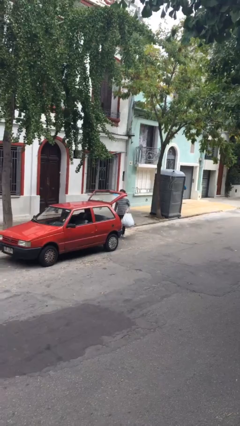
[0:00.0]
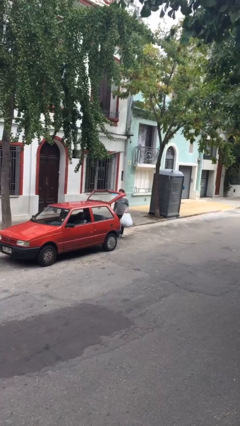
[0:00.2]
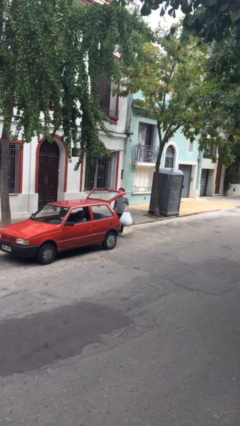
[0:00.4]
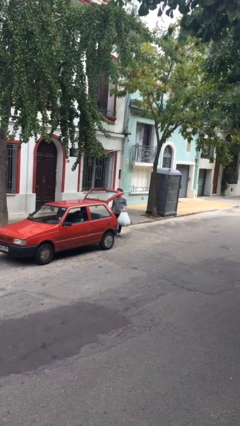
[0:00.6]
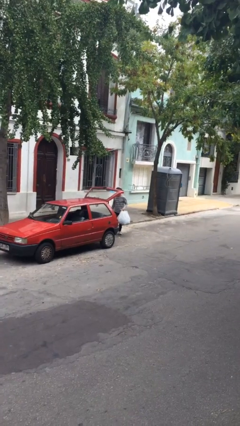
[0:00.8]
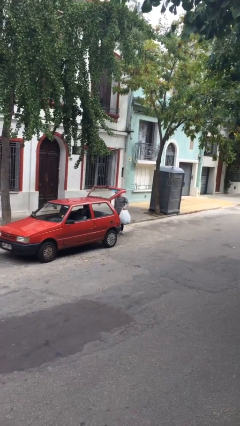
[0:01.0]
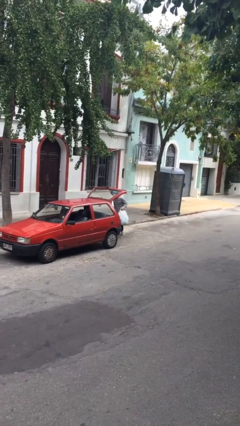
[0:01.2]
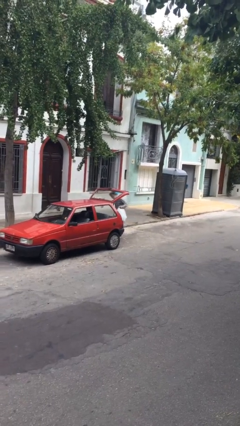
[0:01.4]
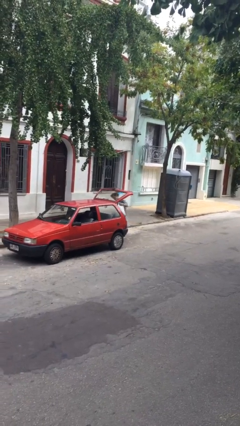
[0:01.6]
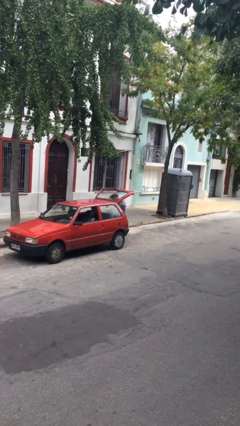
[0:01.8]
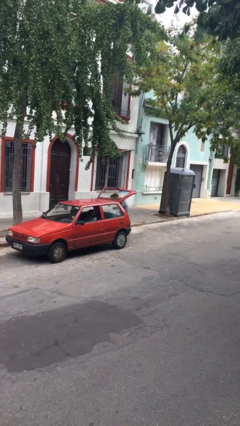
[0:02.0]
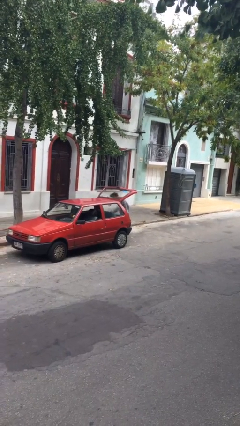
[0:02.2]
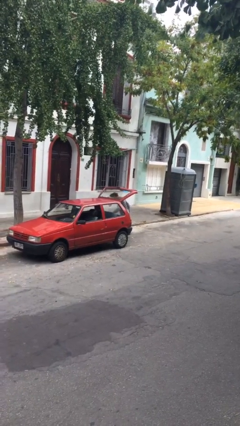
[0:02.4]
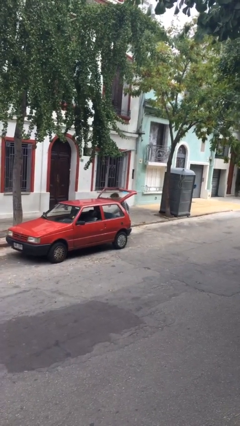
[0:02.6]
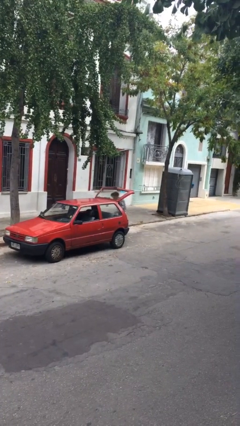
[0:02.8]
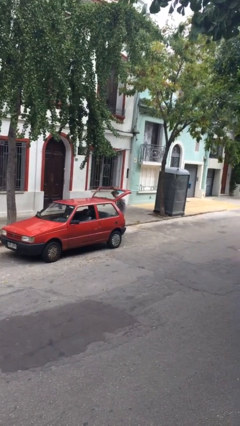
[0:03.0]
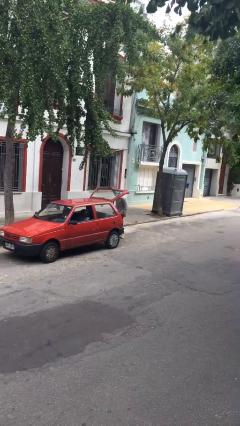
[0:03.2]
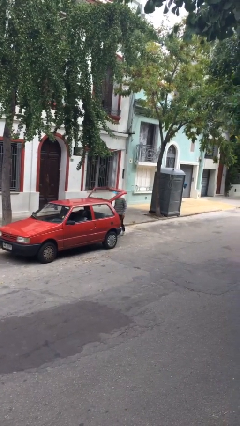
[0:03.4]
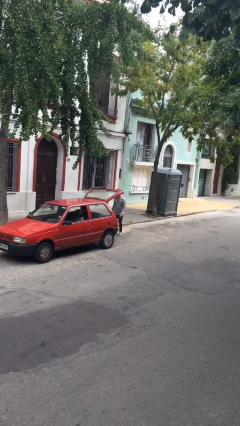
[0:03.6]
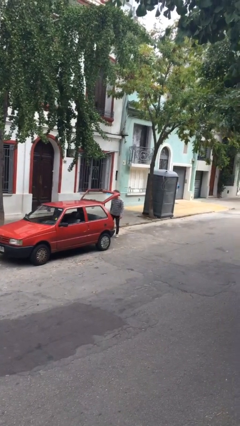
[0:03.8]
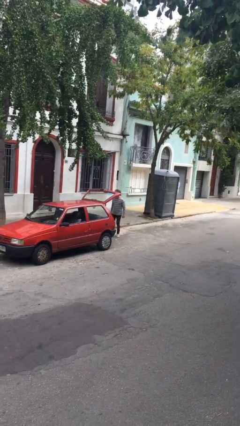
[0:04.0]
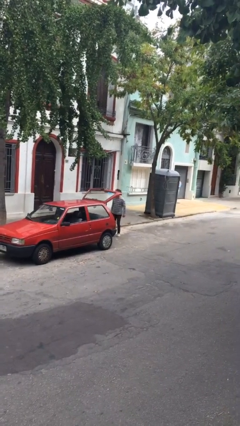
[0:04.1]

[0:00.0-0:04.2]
person loads car

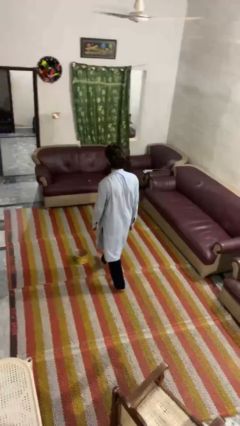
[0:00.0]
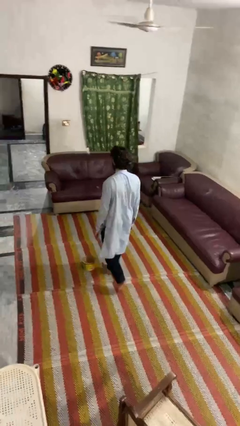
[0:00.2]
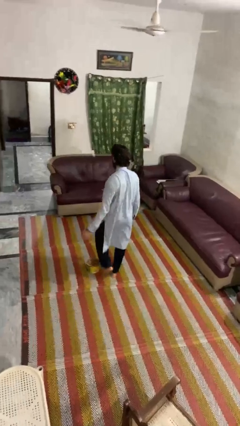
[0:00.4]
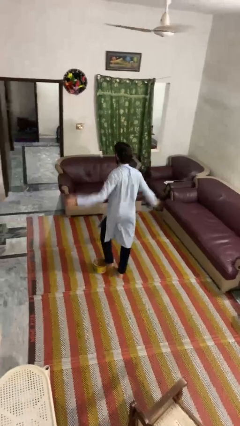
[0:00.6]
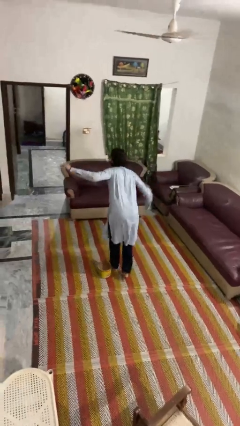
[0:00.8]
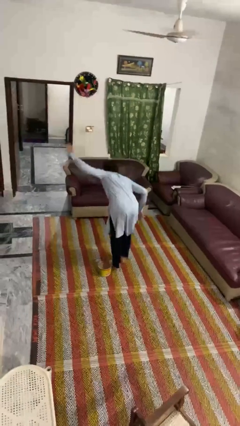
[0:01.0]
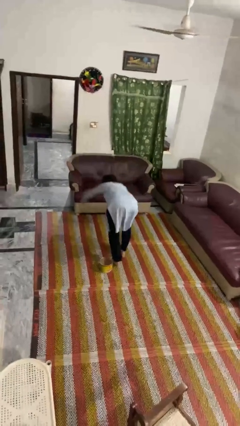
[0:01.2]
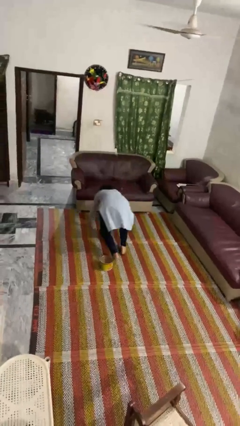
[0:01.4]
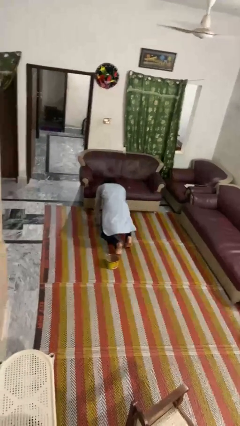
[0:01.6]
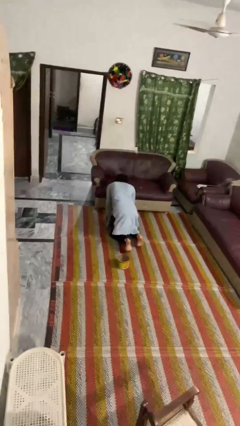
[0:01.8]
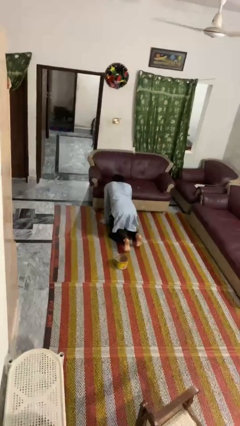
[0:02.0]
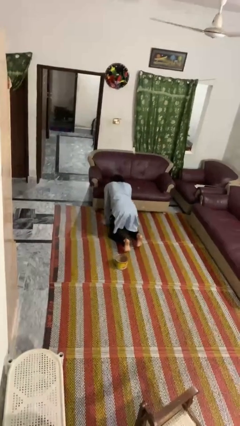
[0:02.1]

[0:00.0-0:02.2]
person trips on object on floor

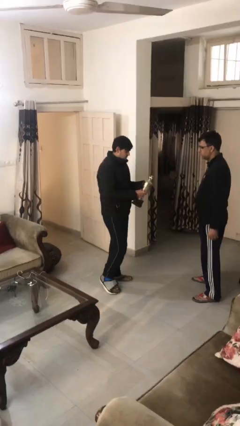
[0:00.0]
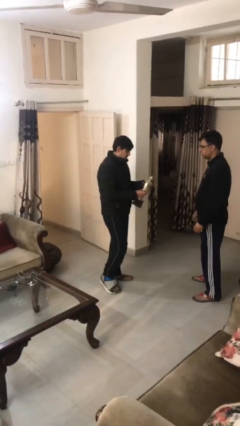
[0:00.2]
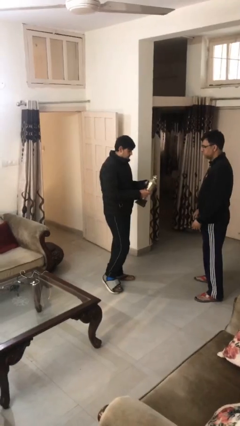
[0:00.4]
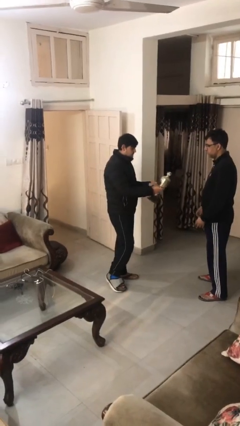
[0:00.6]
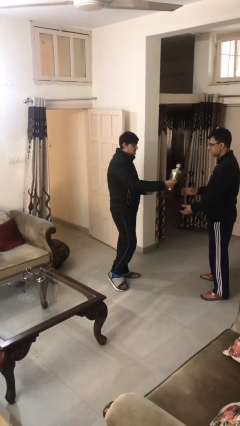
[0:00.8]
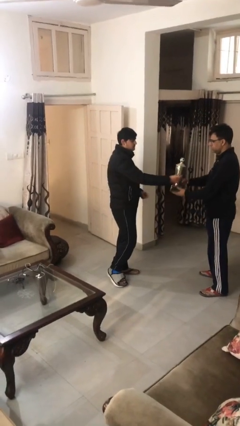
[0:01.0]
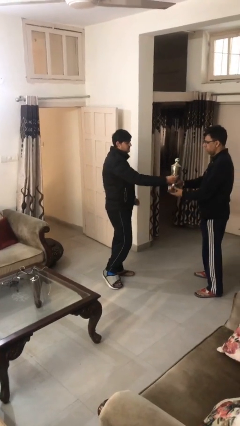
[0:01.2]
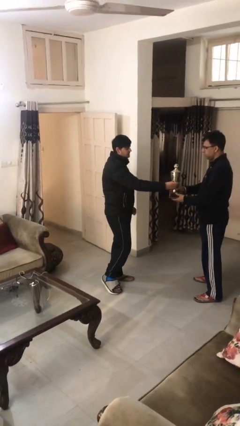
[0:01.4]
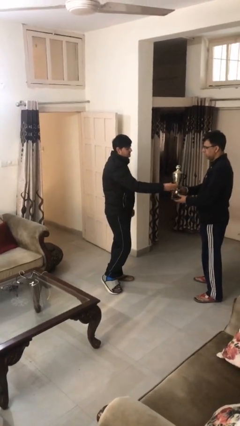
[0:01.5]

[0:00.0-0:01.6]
person transfers object to person

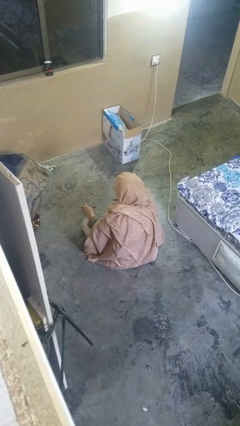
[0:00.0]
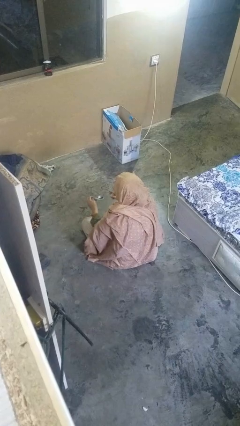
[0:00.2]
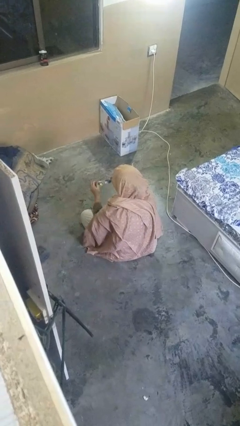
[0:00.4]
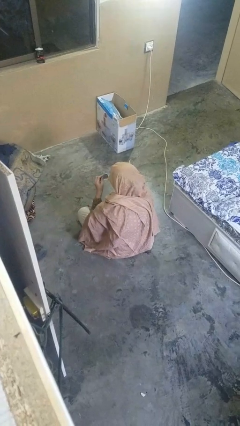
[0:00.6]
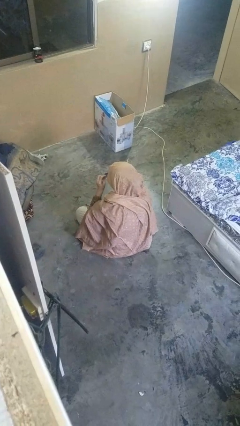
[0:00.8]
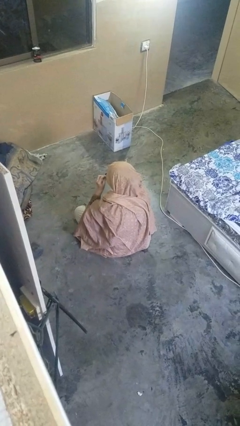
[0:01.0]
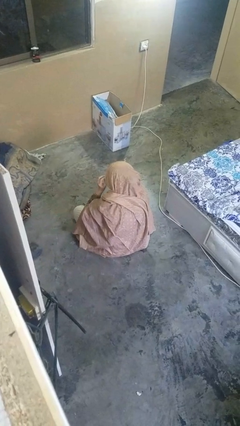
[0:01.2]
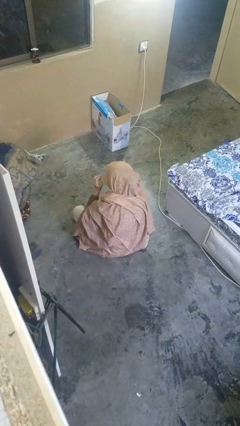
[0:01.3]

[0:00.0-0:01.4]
person puts on glasses

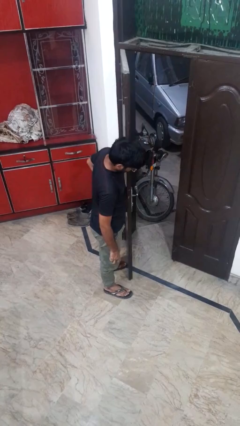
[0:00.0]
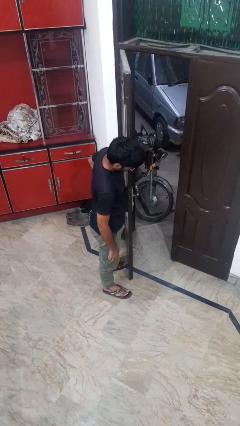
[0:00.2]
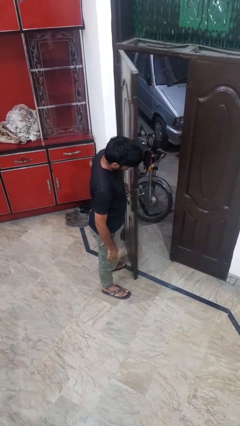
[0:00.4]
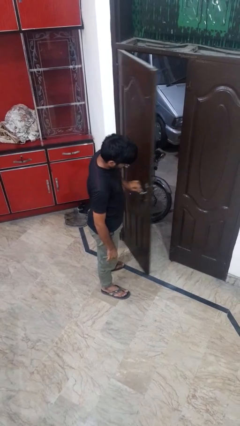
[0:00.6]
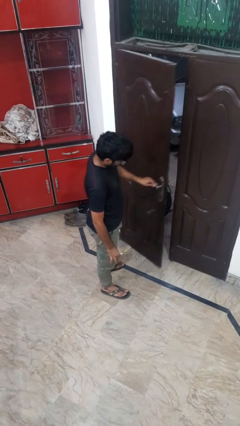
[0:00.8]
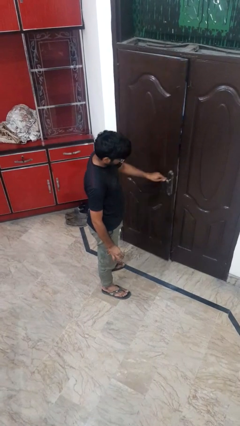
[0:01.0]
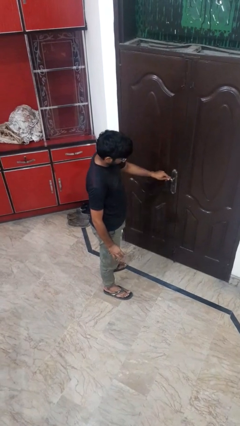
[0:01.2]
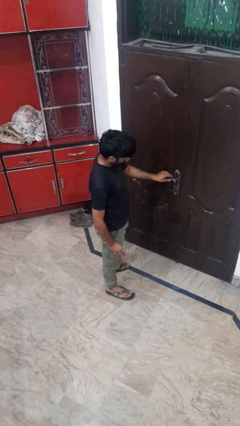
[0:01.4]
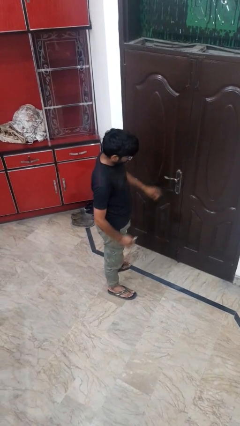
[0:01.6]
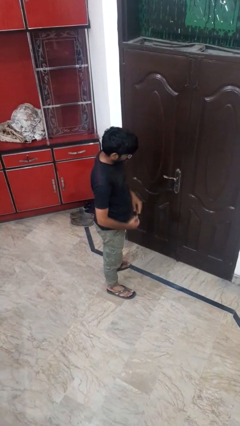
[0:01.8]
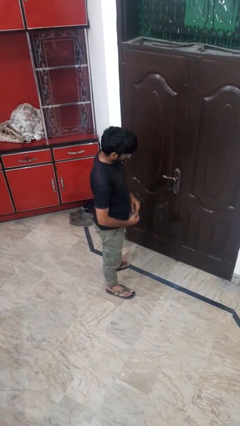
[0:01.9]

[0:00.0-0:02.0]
person closes facility door

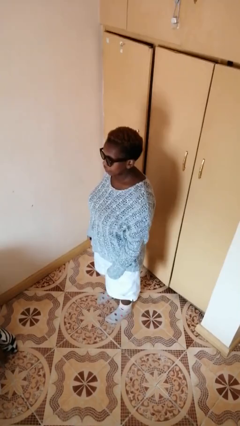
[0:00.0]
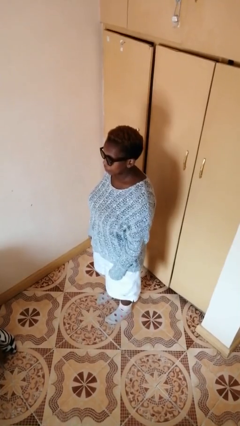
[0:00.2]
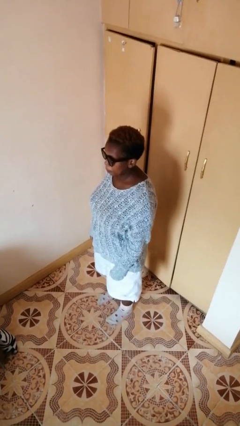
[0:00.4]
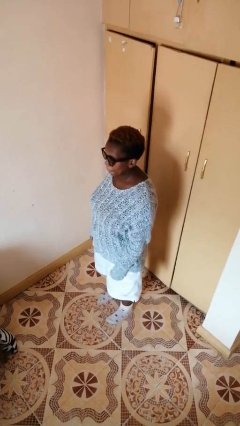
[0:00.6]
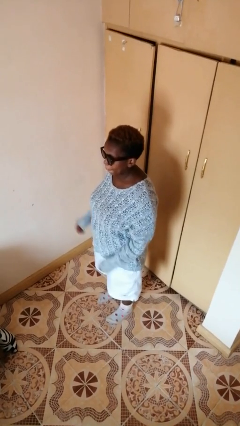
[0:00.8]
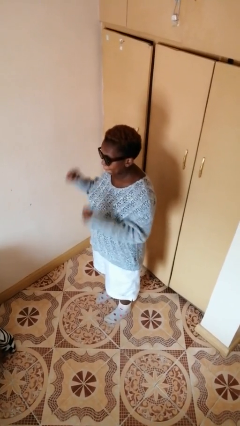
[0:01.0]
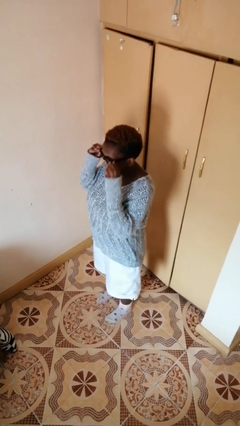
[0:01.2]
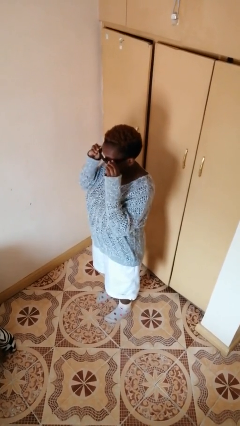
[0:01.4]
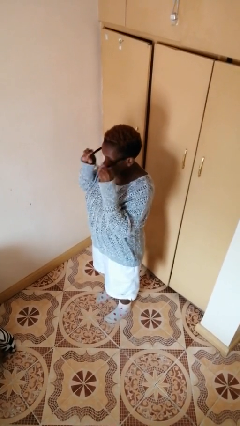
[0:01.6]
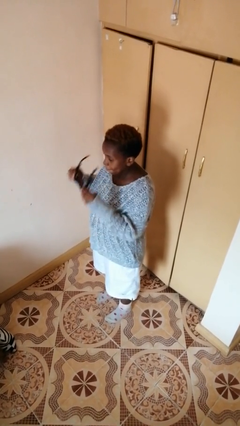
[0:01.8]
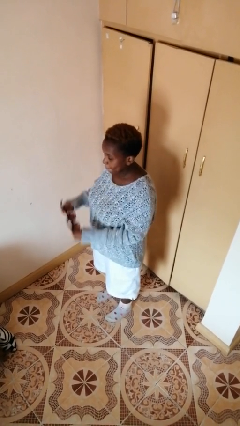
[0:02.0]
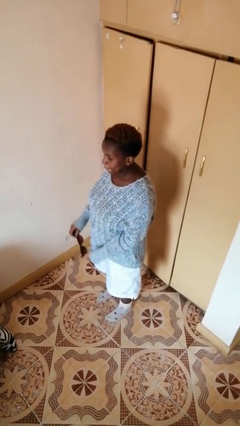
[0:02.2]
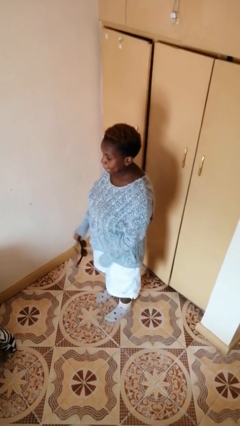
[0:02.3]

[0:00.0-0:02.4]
person takes off sunglasses

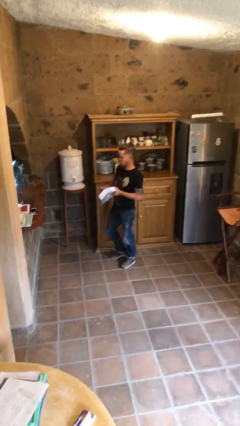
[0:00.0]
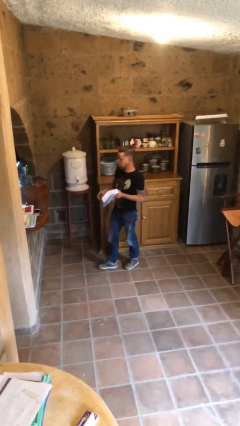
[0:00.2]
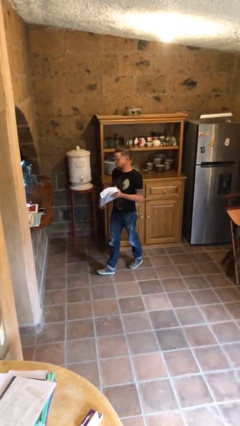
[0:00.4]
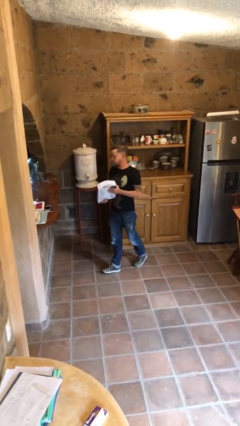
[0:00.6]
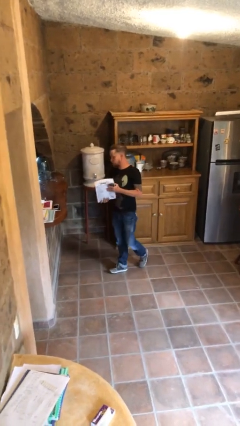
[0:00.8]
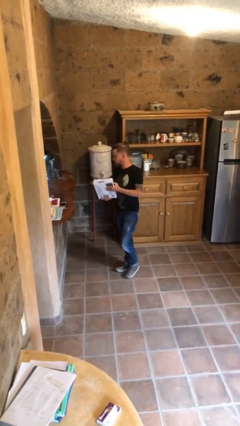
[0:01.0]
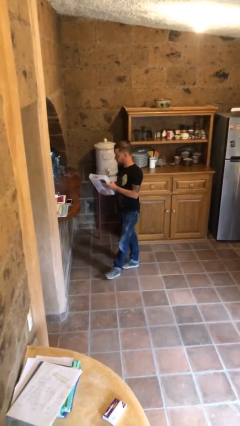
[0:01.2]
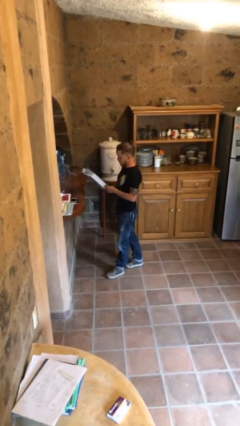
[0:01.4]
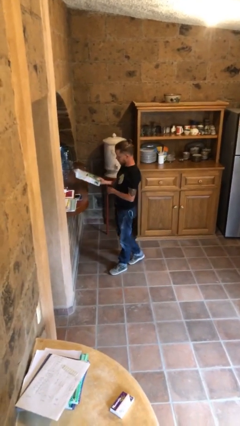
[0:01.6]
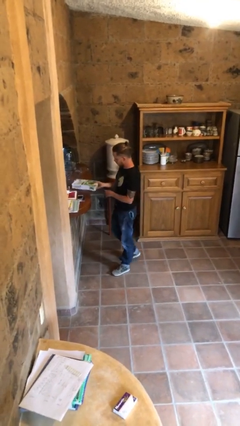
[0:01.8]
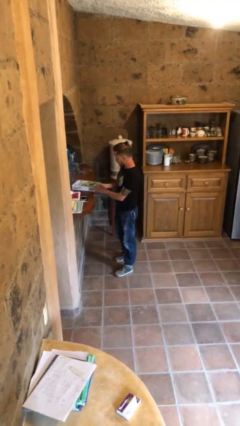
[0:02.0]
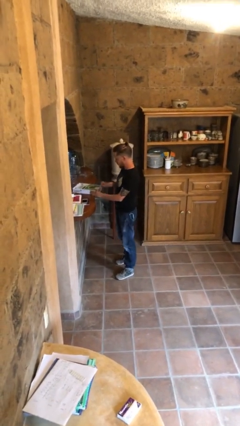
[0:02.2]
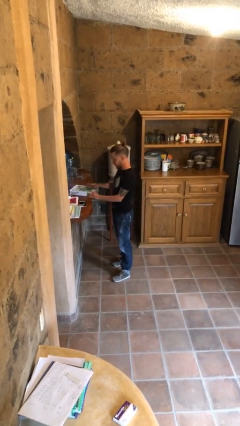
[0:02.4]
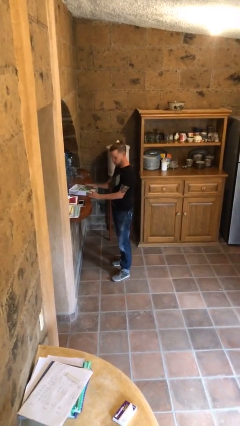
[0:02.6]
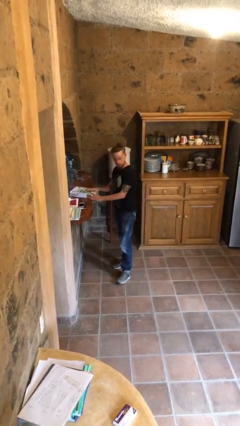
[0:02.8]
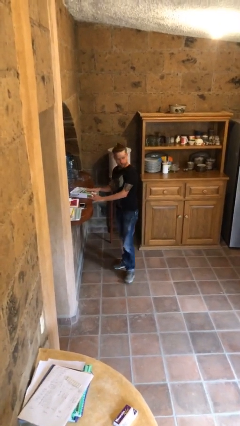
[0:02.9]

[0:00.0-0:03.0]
person puts down object on table
